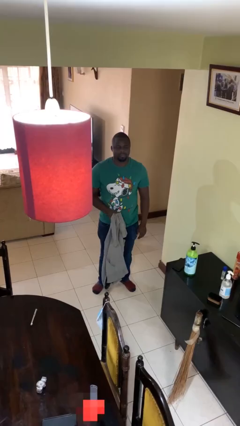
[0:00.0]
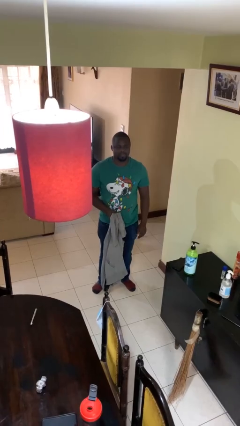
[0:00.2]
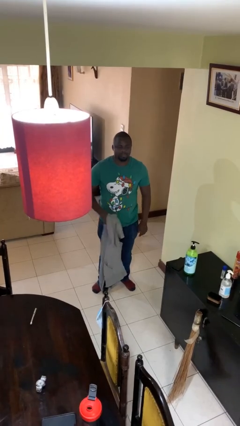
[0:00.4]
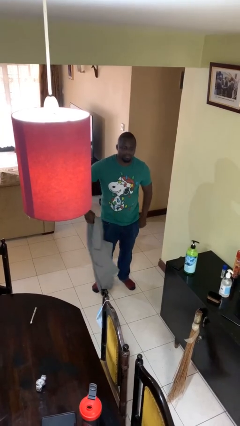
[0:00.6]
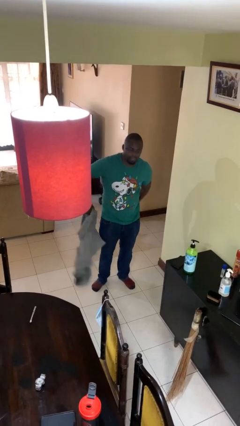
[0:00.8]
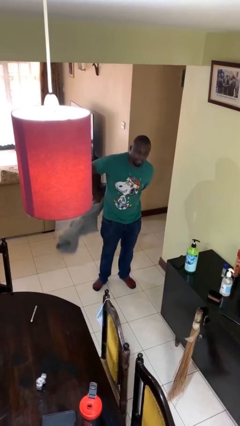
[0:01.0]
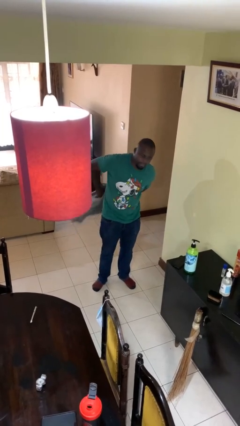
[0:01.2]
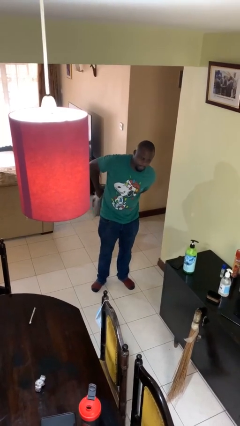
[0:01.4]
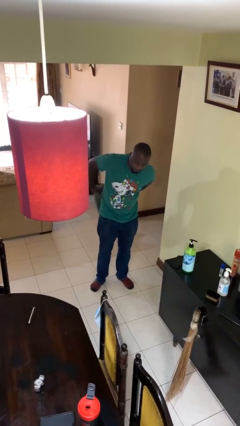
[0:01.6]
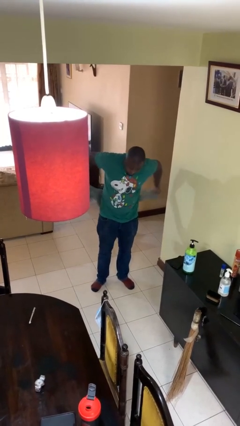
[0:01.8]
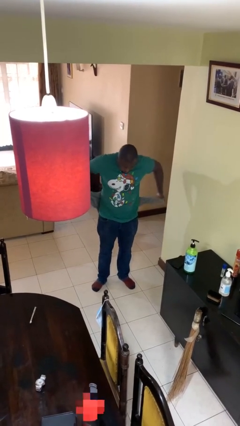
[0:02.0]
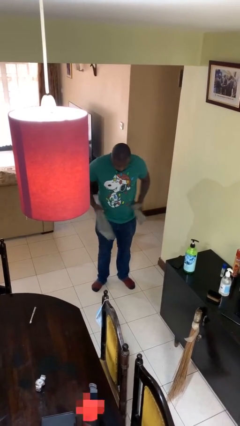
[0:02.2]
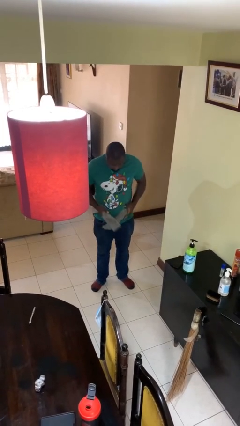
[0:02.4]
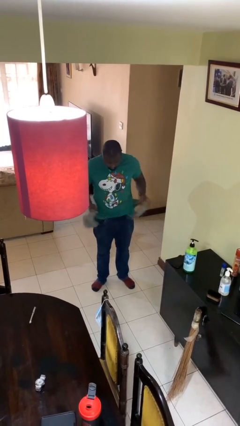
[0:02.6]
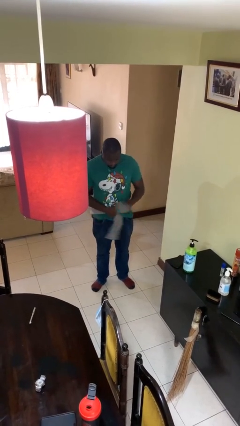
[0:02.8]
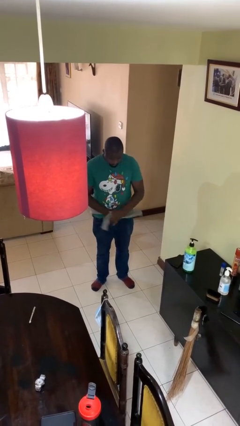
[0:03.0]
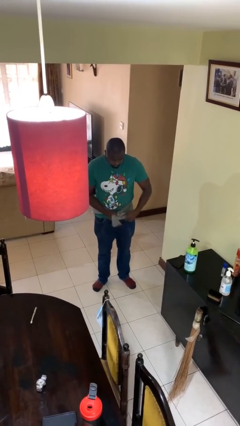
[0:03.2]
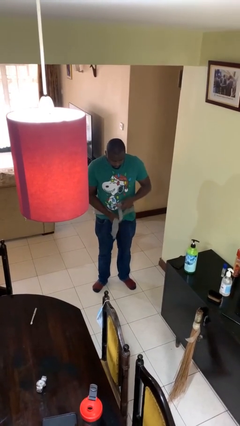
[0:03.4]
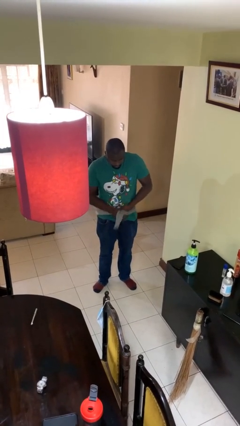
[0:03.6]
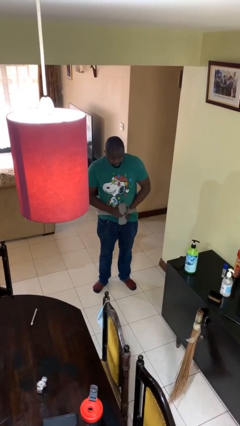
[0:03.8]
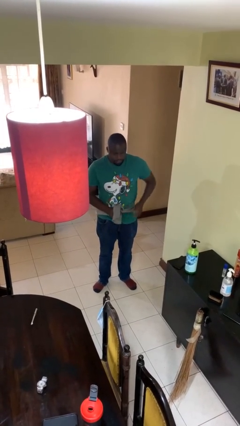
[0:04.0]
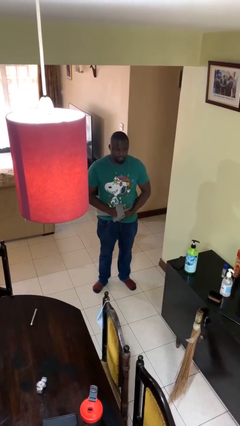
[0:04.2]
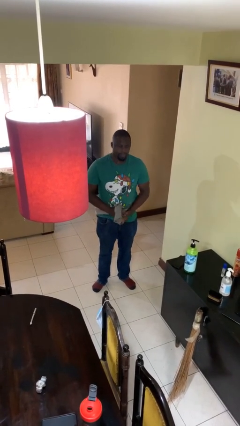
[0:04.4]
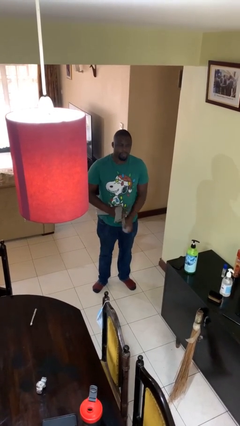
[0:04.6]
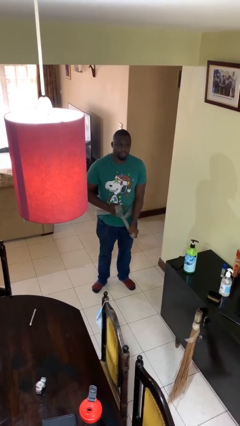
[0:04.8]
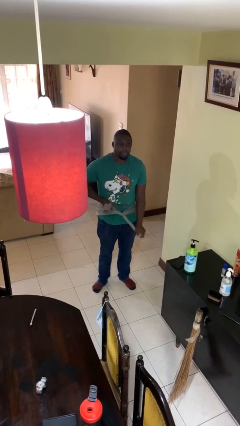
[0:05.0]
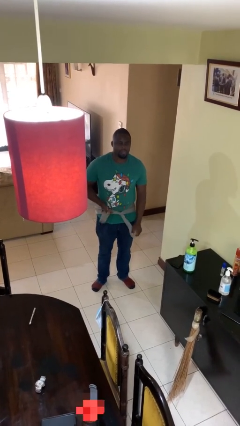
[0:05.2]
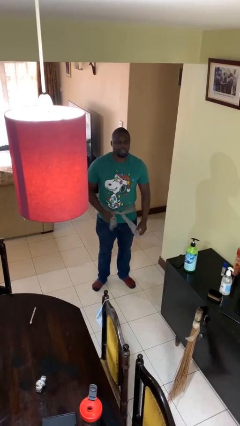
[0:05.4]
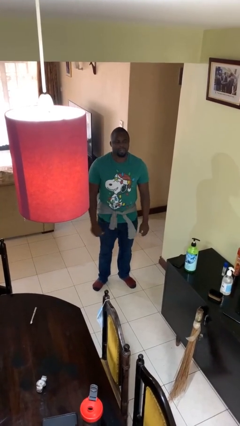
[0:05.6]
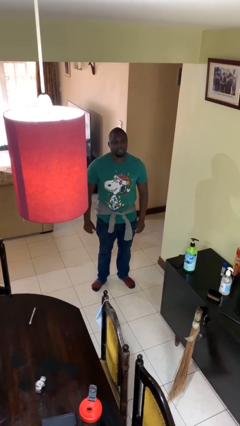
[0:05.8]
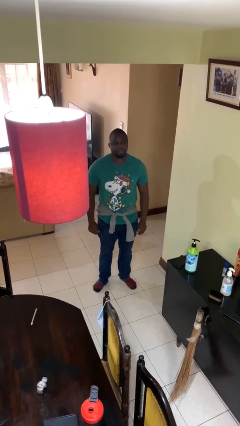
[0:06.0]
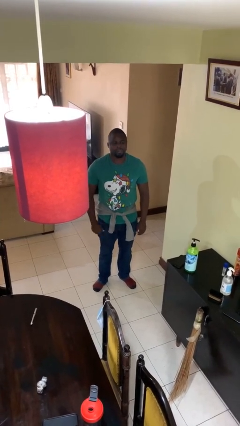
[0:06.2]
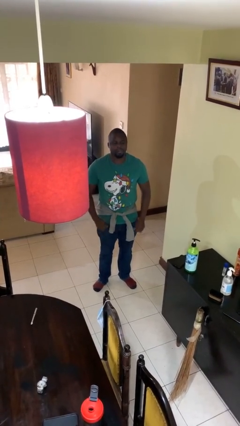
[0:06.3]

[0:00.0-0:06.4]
person ties jacket around waist

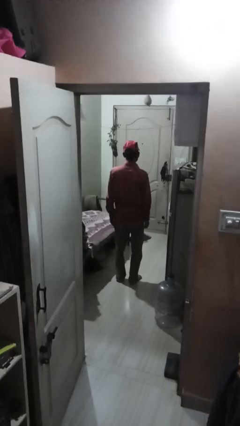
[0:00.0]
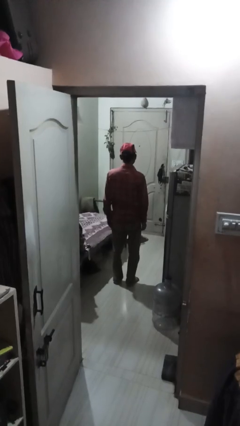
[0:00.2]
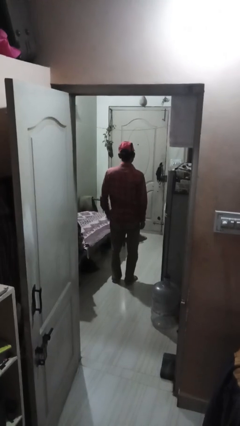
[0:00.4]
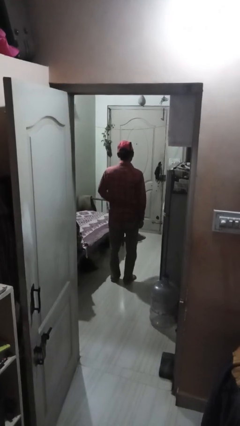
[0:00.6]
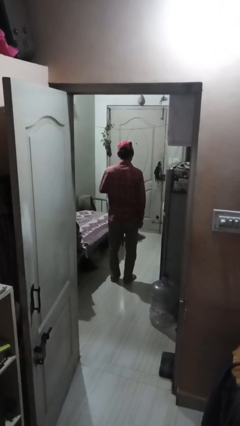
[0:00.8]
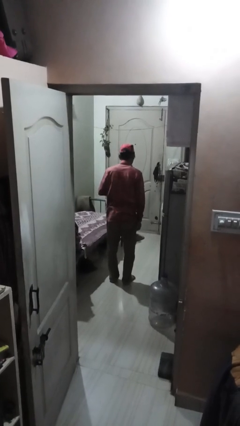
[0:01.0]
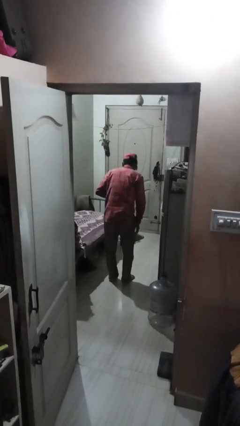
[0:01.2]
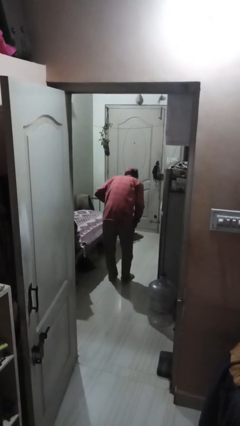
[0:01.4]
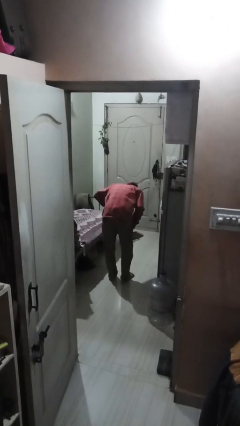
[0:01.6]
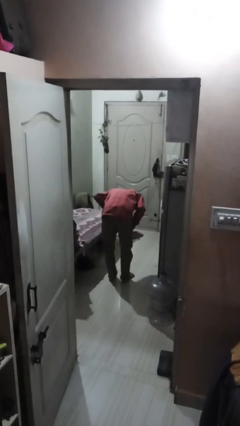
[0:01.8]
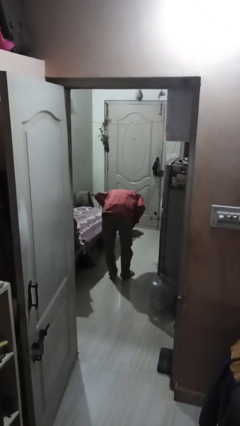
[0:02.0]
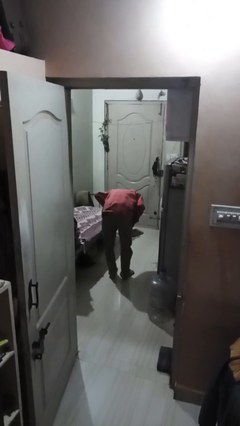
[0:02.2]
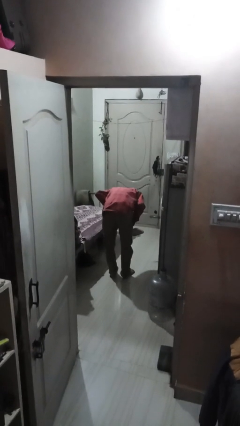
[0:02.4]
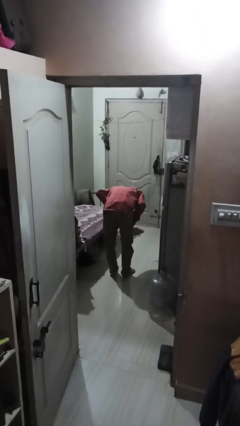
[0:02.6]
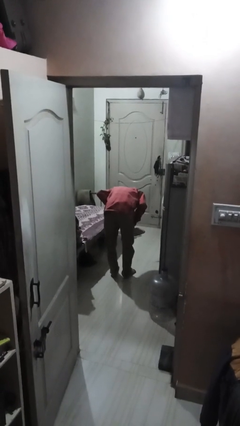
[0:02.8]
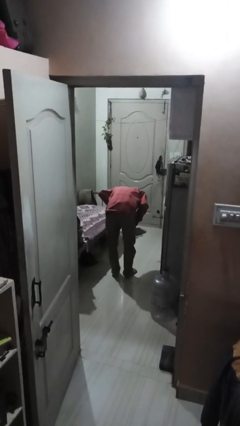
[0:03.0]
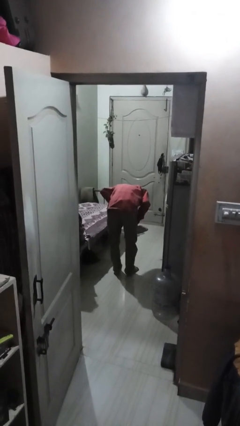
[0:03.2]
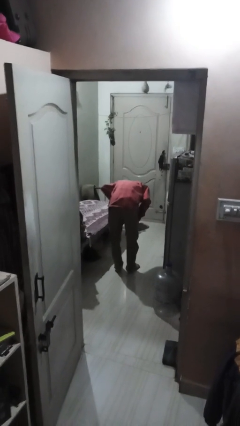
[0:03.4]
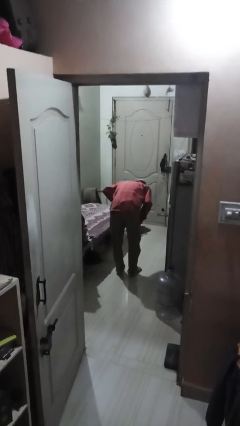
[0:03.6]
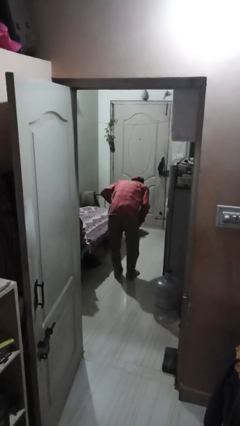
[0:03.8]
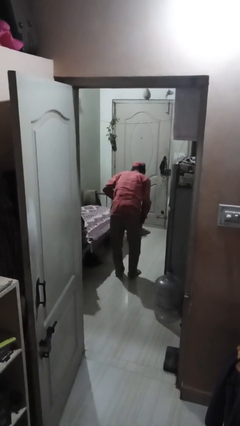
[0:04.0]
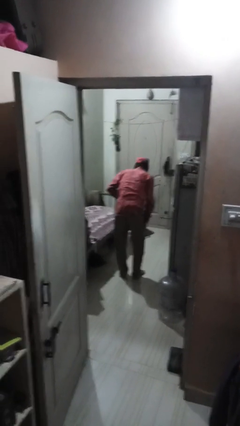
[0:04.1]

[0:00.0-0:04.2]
person bows

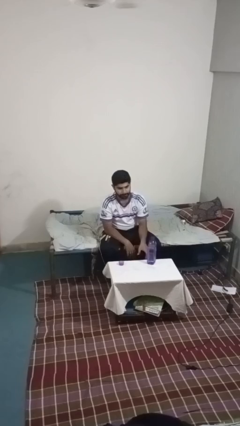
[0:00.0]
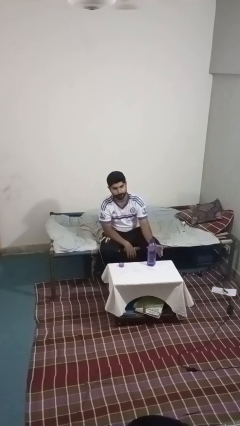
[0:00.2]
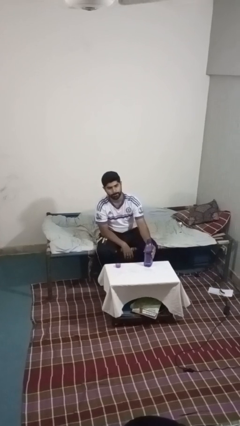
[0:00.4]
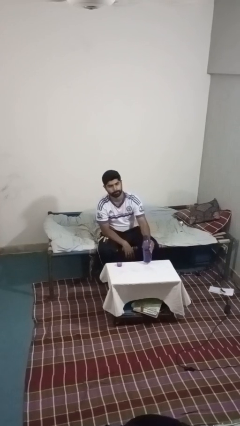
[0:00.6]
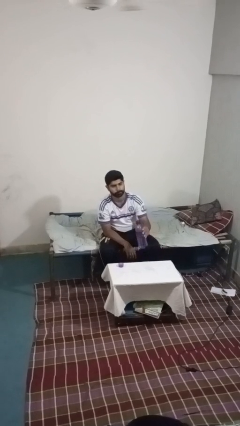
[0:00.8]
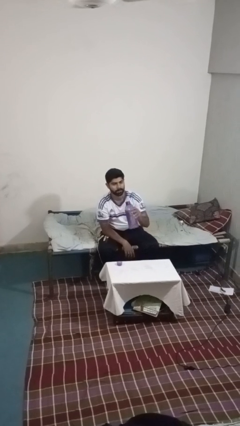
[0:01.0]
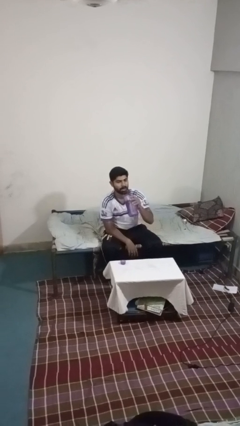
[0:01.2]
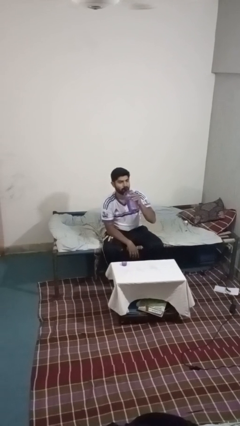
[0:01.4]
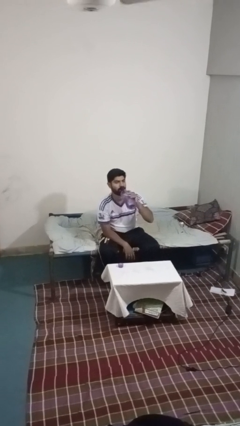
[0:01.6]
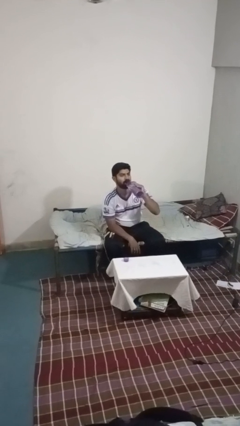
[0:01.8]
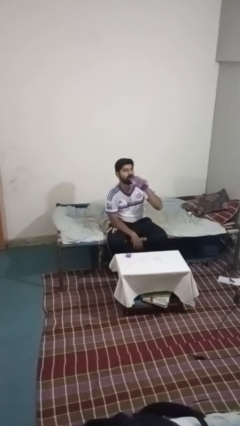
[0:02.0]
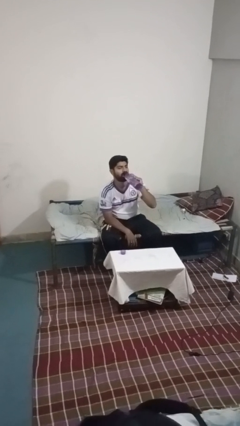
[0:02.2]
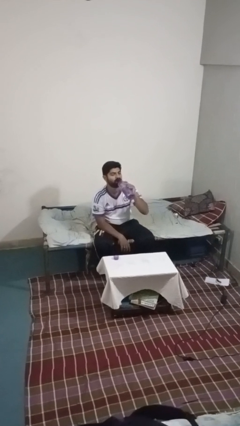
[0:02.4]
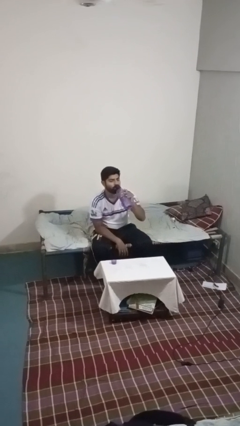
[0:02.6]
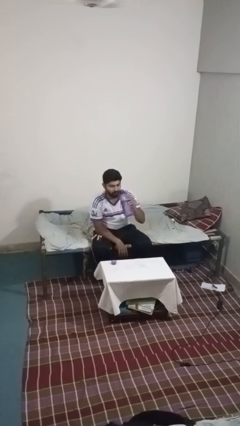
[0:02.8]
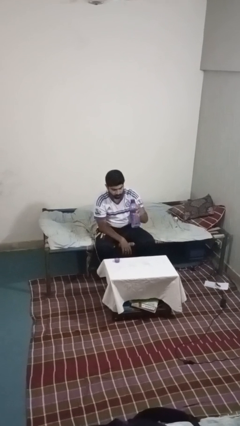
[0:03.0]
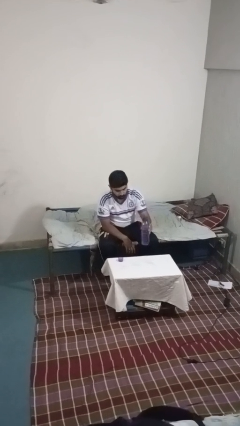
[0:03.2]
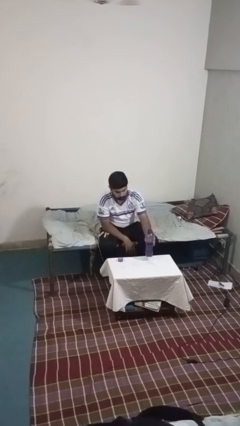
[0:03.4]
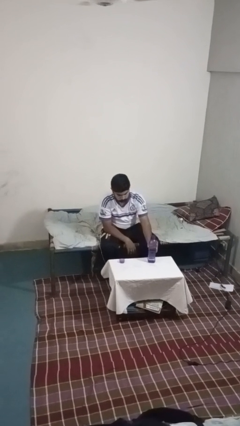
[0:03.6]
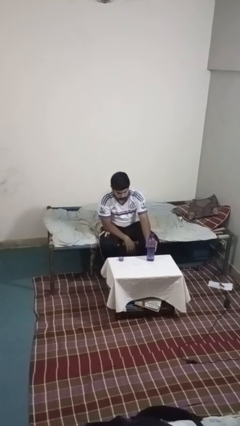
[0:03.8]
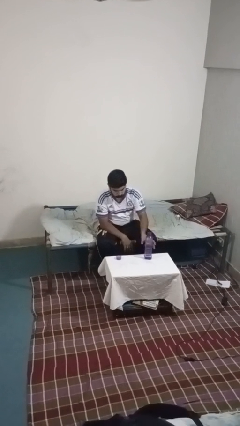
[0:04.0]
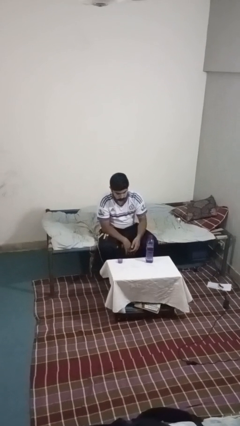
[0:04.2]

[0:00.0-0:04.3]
person drinks from bottle

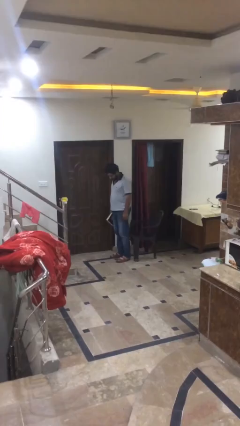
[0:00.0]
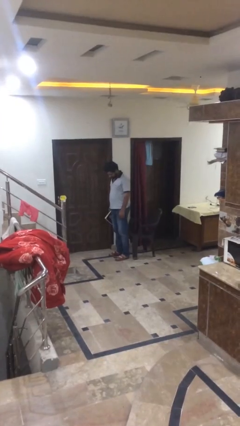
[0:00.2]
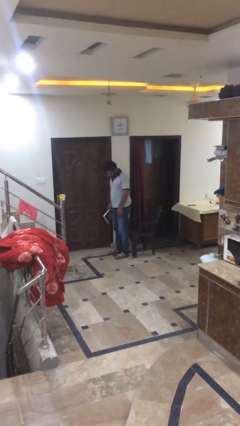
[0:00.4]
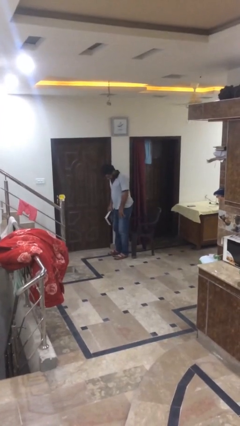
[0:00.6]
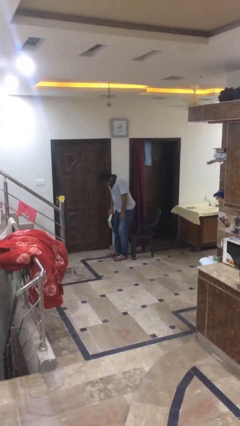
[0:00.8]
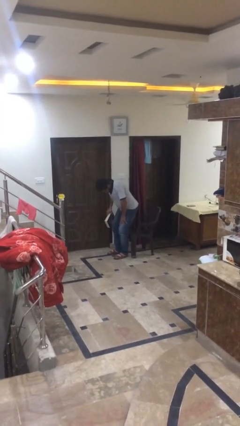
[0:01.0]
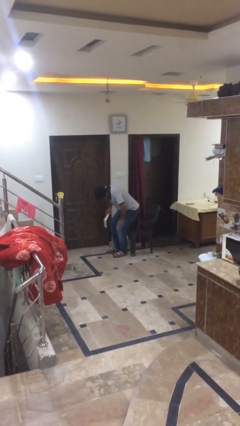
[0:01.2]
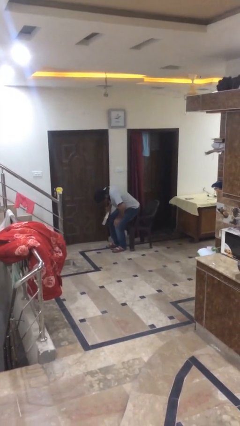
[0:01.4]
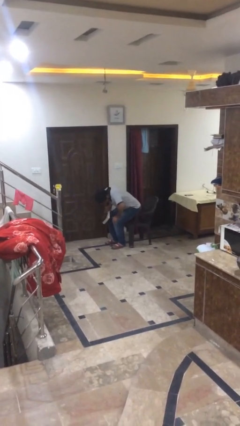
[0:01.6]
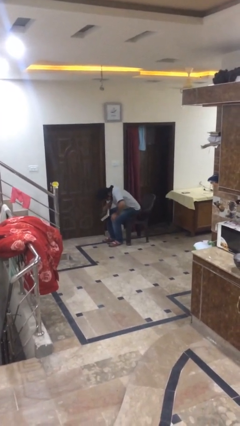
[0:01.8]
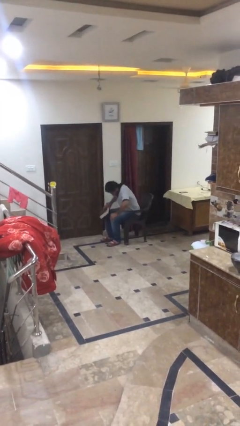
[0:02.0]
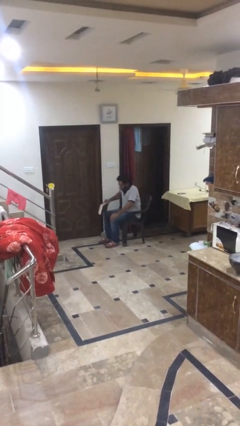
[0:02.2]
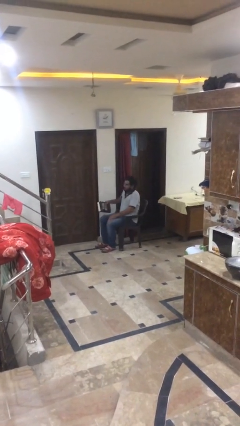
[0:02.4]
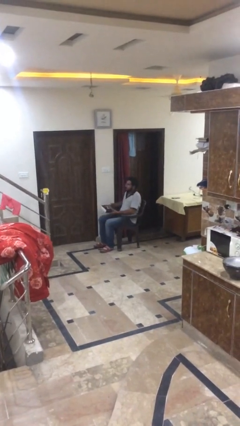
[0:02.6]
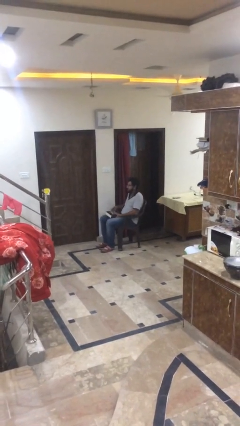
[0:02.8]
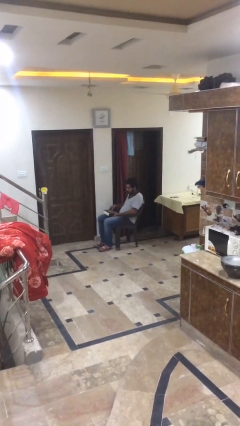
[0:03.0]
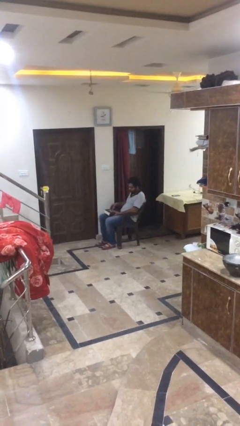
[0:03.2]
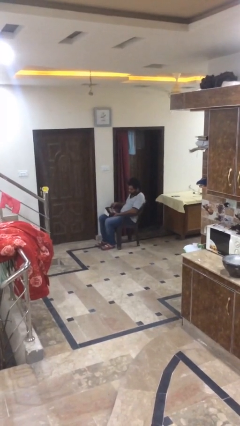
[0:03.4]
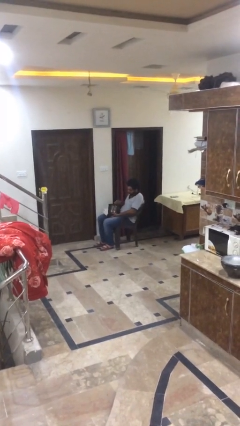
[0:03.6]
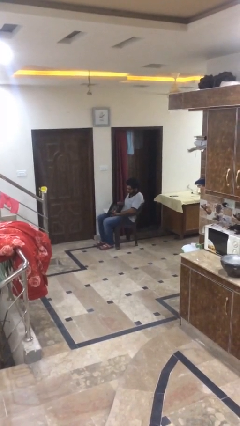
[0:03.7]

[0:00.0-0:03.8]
person sits down
